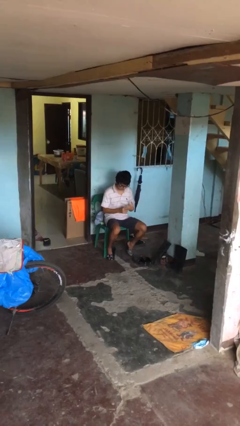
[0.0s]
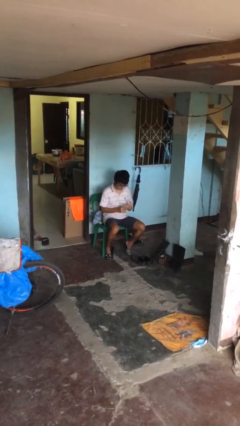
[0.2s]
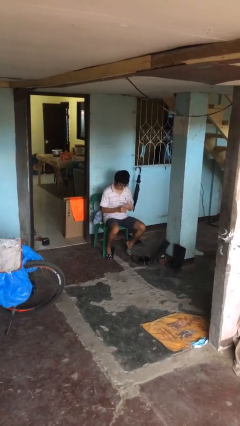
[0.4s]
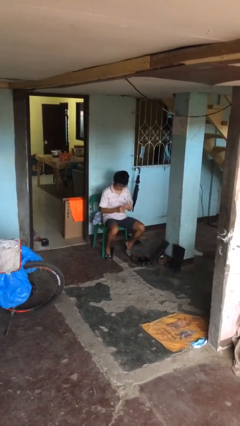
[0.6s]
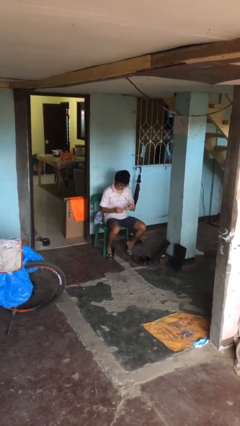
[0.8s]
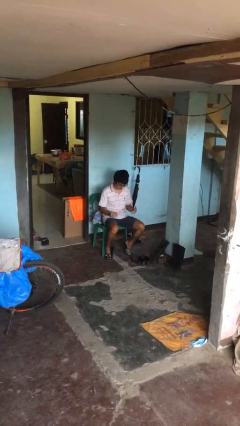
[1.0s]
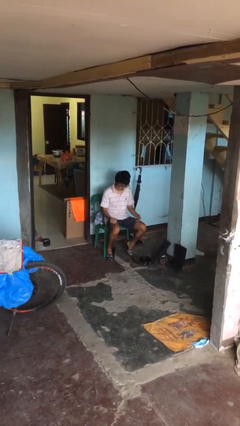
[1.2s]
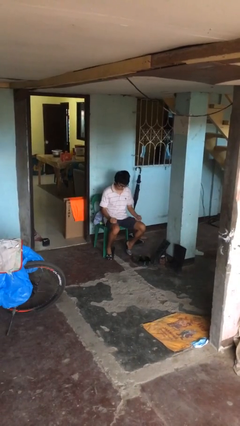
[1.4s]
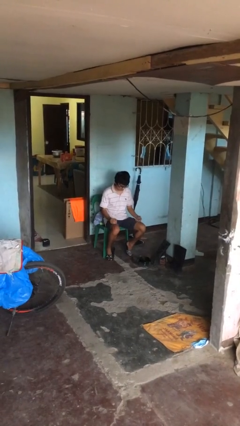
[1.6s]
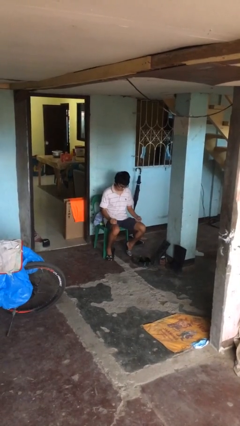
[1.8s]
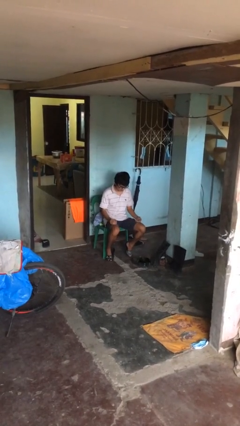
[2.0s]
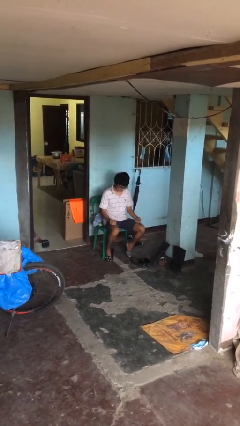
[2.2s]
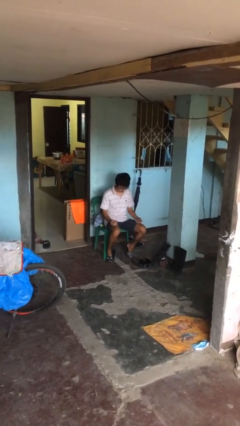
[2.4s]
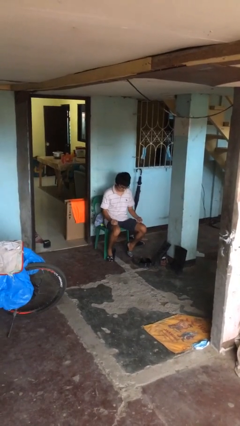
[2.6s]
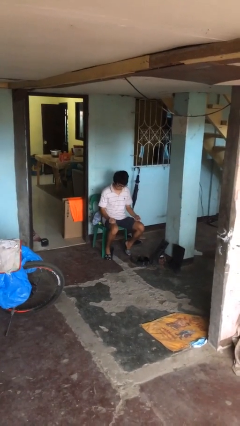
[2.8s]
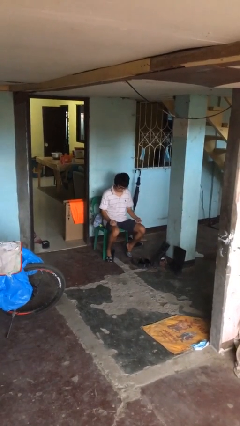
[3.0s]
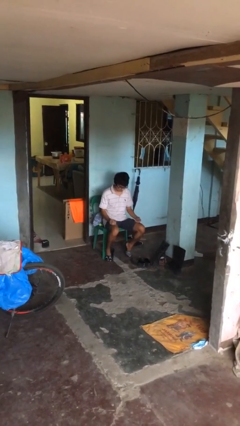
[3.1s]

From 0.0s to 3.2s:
person takes off ring

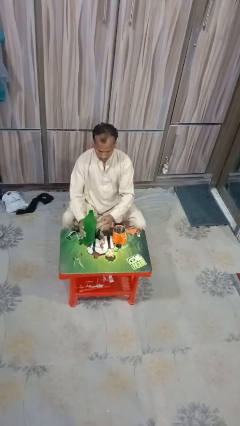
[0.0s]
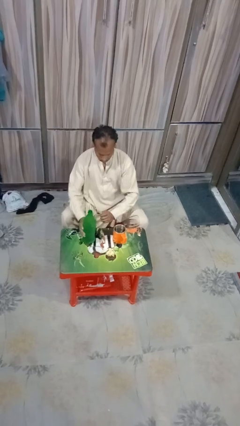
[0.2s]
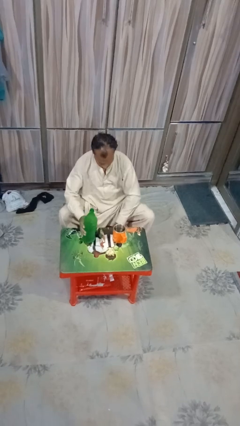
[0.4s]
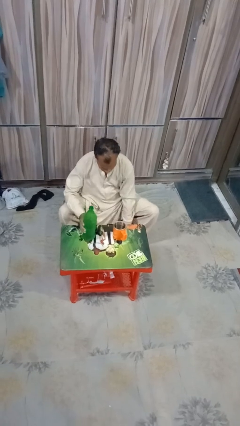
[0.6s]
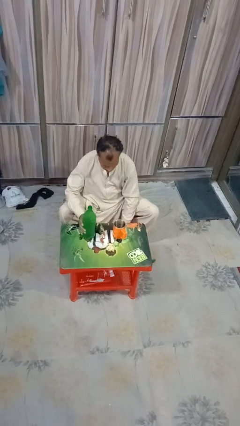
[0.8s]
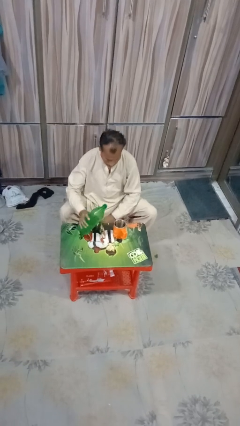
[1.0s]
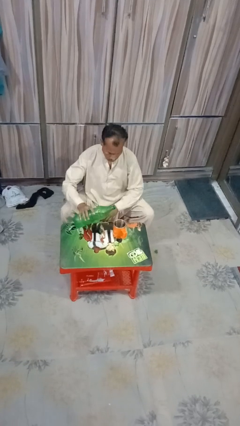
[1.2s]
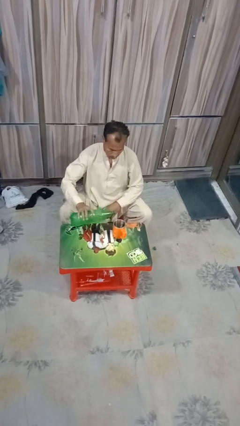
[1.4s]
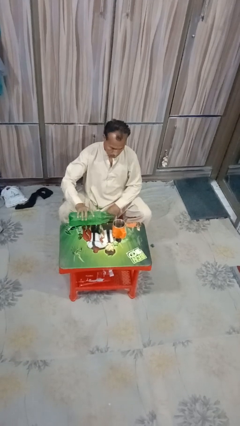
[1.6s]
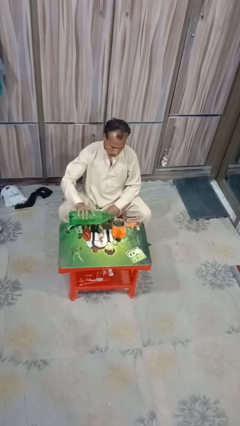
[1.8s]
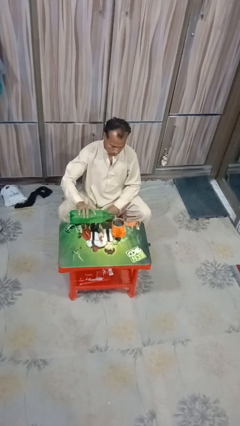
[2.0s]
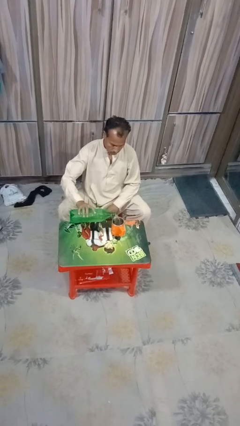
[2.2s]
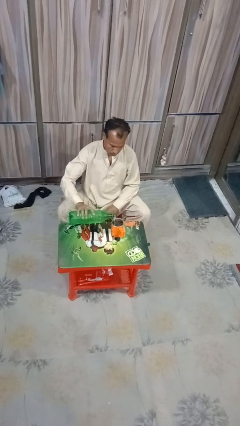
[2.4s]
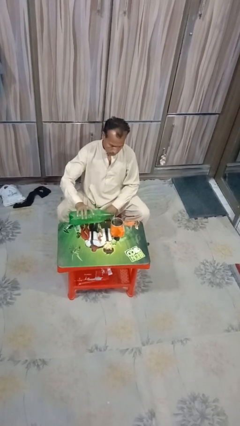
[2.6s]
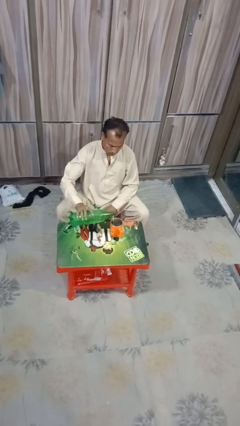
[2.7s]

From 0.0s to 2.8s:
person pours liquid into cup

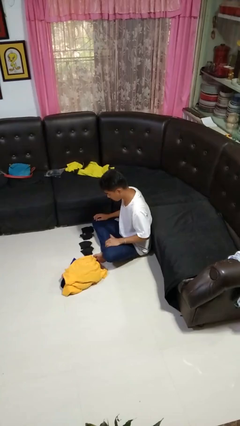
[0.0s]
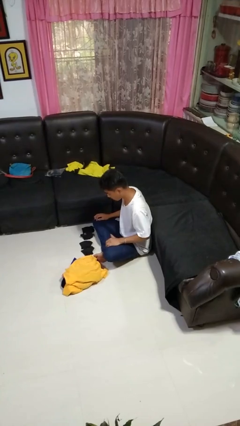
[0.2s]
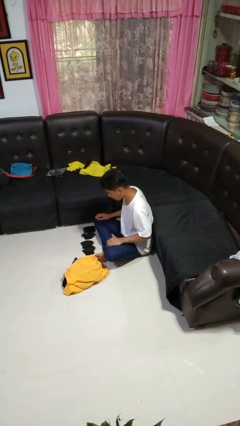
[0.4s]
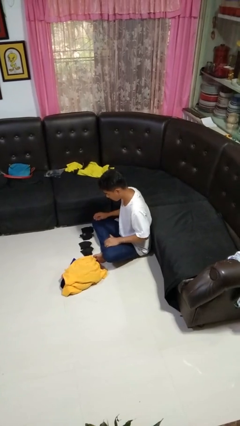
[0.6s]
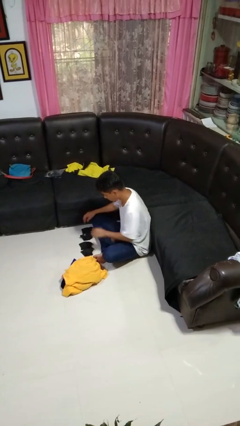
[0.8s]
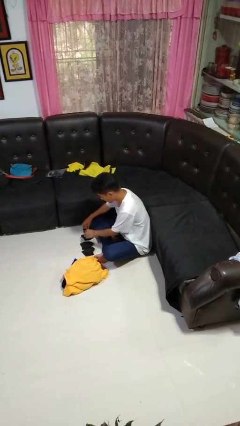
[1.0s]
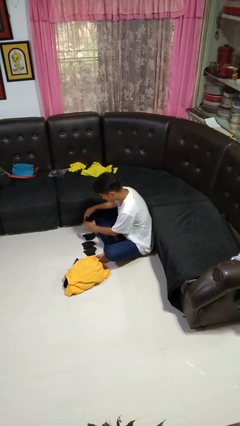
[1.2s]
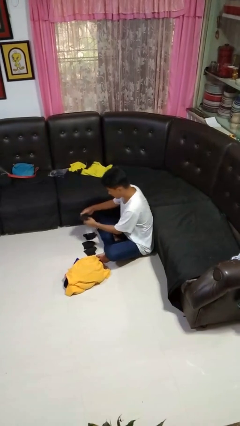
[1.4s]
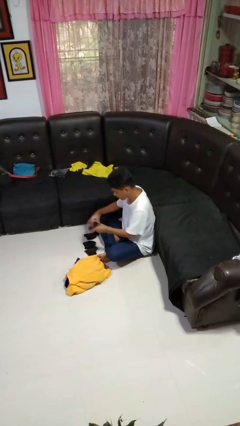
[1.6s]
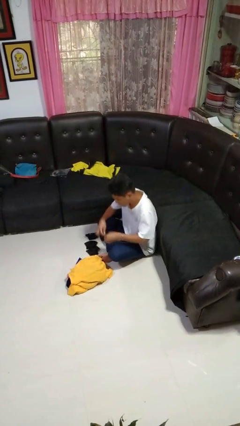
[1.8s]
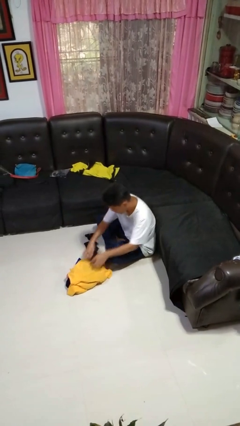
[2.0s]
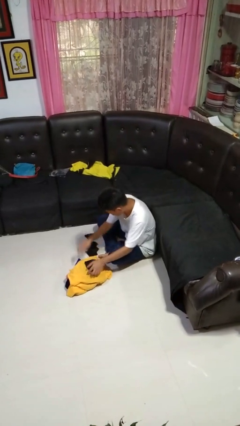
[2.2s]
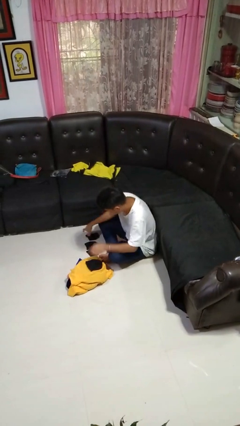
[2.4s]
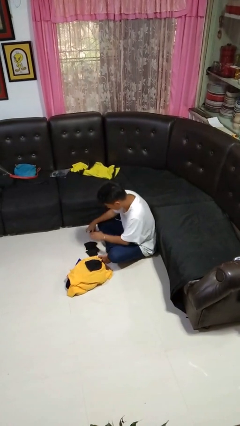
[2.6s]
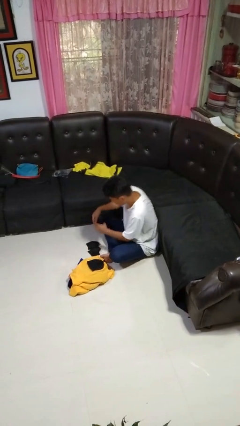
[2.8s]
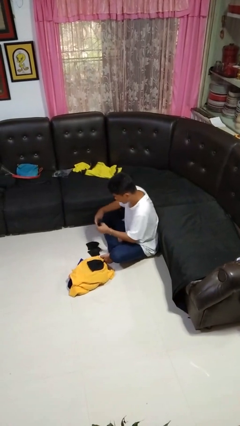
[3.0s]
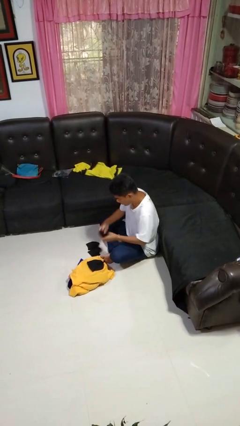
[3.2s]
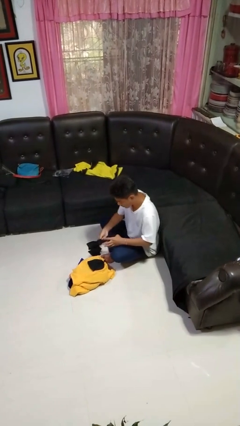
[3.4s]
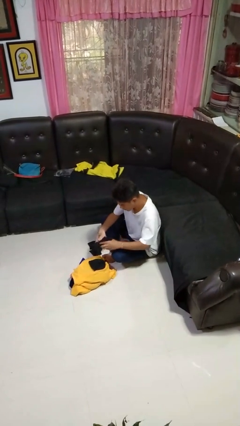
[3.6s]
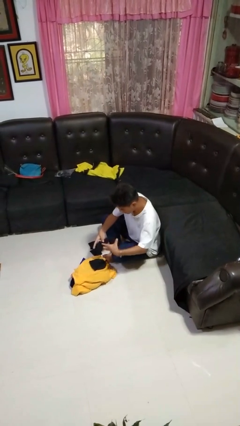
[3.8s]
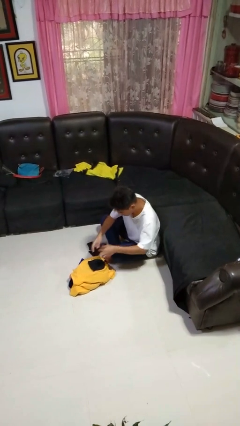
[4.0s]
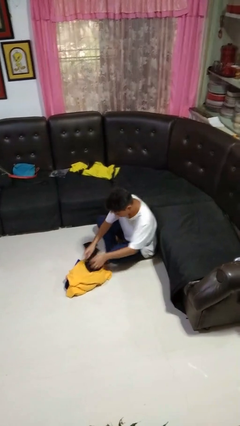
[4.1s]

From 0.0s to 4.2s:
person folds socks

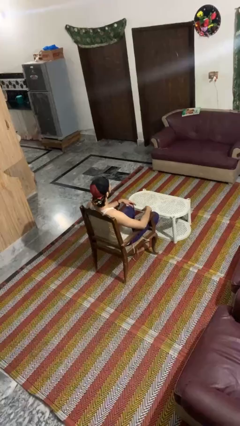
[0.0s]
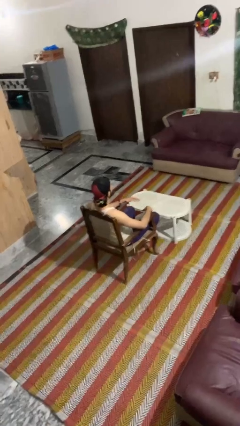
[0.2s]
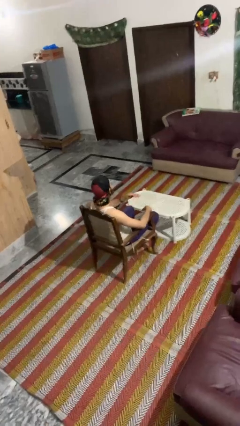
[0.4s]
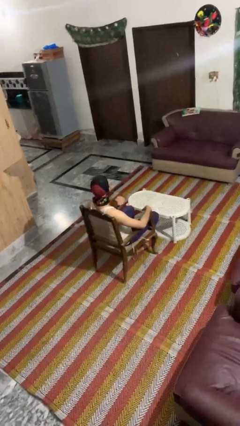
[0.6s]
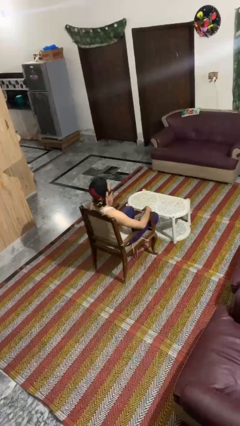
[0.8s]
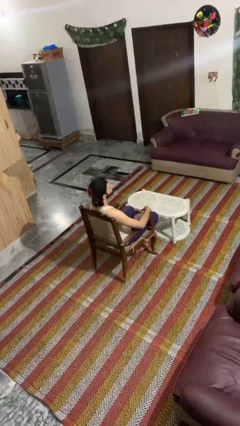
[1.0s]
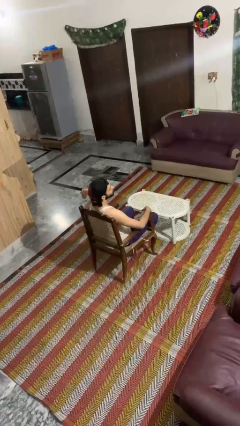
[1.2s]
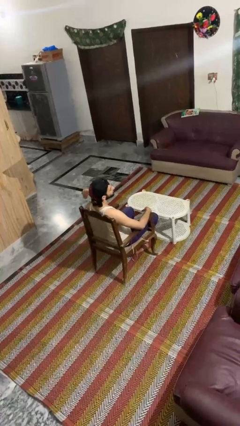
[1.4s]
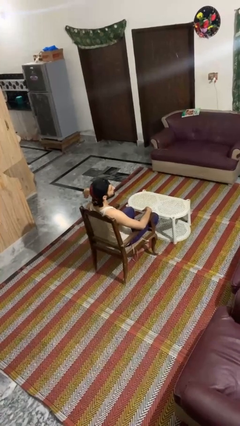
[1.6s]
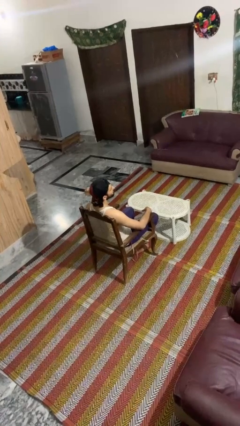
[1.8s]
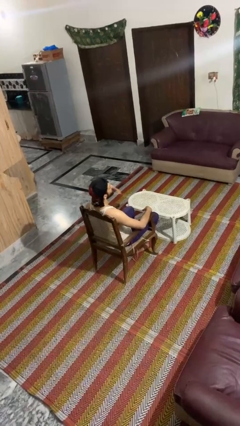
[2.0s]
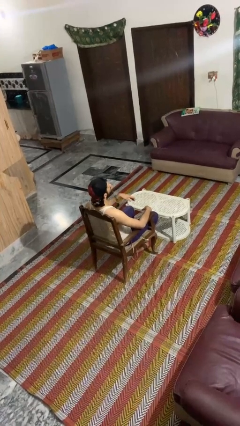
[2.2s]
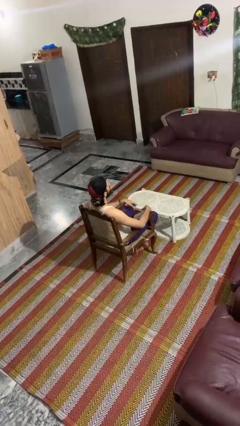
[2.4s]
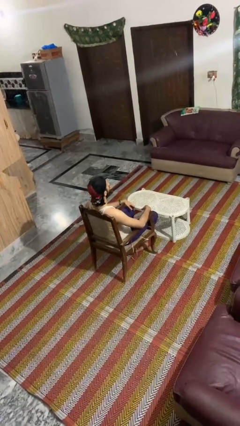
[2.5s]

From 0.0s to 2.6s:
person gestures cut

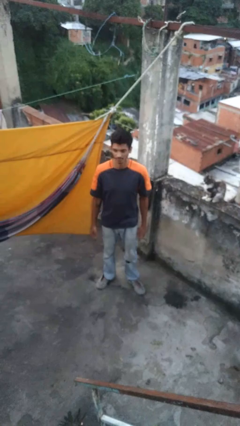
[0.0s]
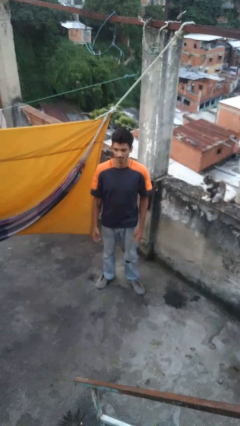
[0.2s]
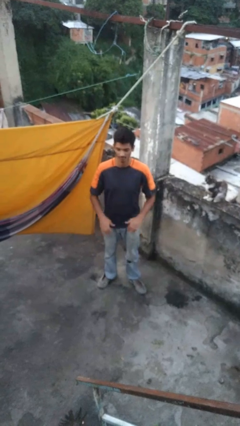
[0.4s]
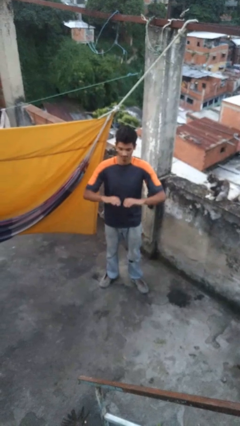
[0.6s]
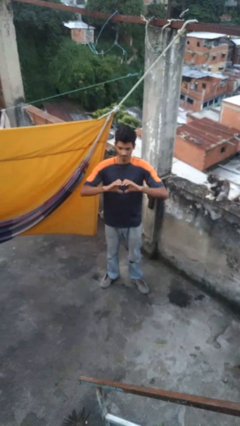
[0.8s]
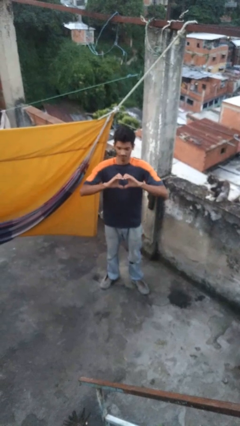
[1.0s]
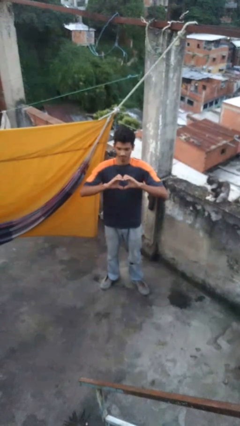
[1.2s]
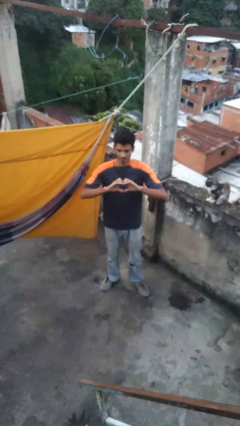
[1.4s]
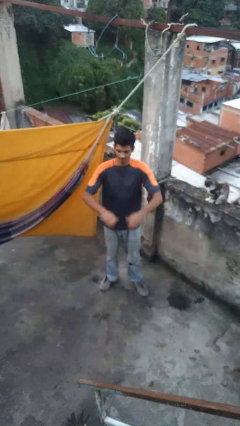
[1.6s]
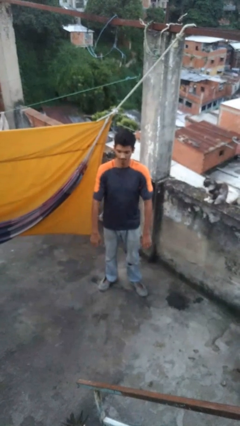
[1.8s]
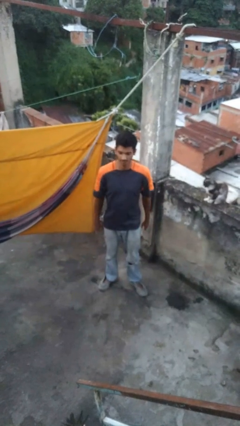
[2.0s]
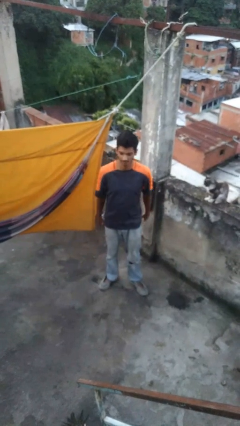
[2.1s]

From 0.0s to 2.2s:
person gestures heart

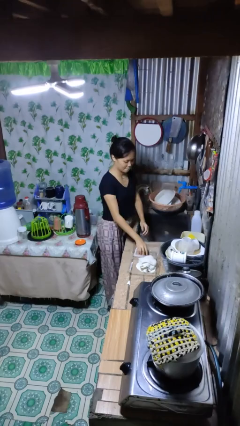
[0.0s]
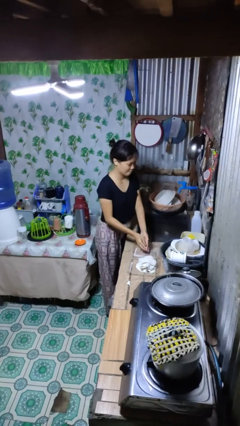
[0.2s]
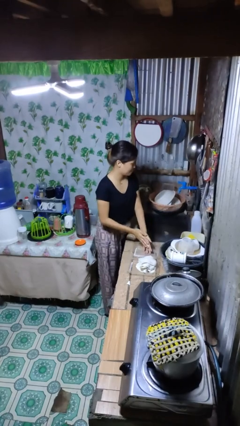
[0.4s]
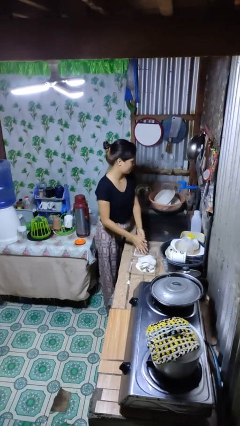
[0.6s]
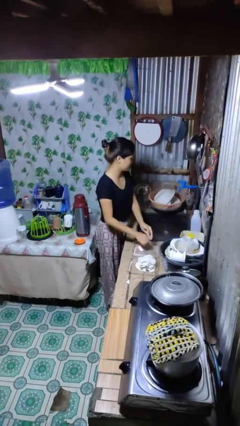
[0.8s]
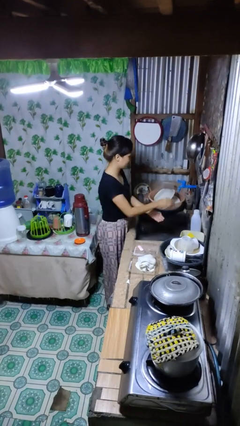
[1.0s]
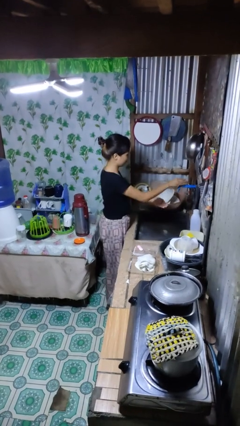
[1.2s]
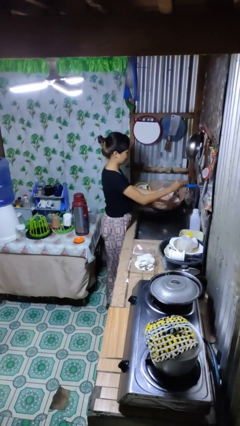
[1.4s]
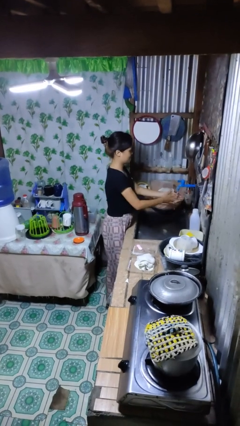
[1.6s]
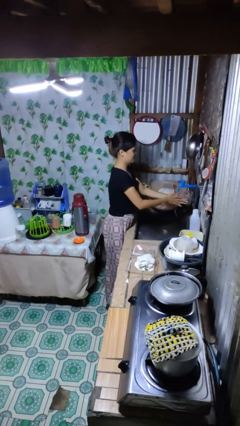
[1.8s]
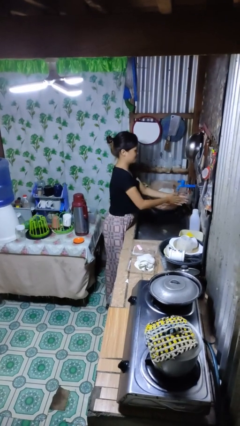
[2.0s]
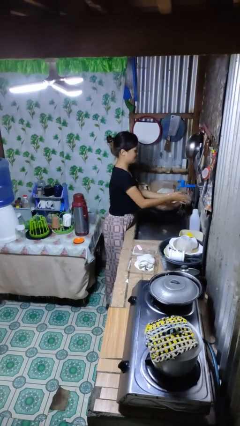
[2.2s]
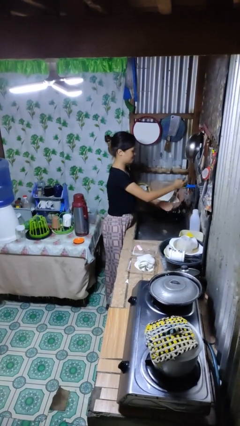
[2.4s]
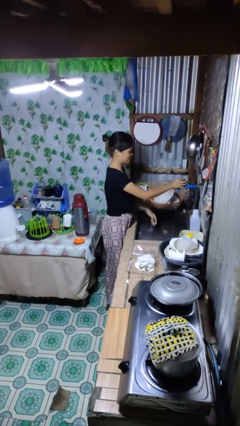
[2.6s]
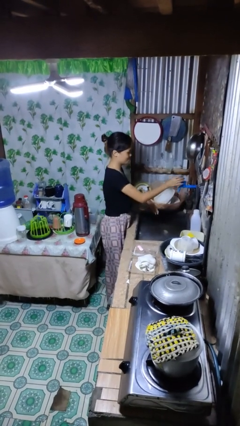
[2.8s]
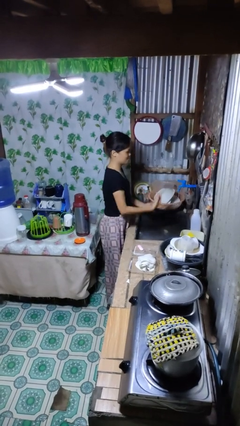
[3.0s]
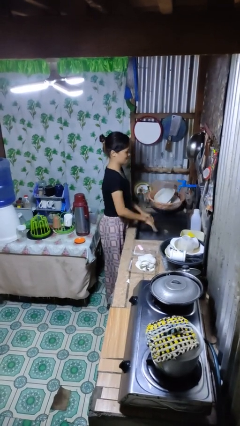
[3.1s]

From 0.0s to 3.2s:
person washes hands
